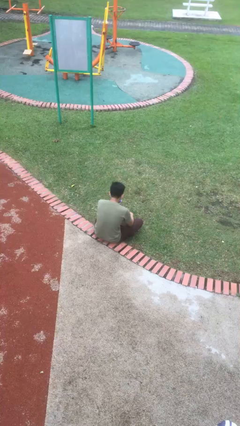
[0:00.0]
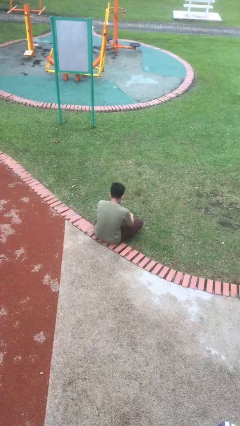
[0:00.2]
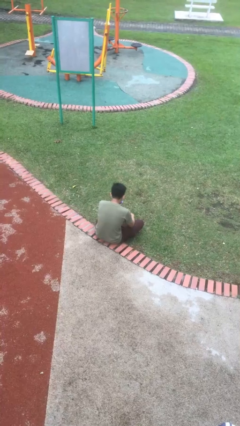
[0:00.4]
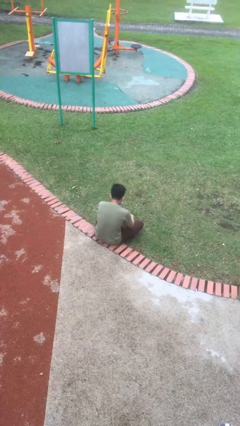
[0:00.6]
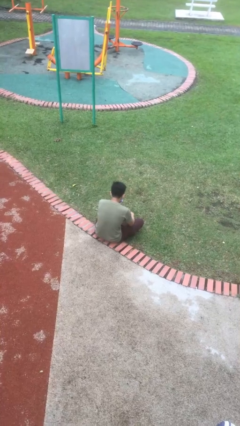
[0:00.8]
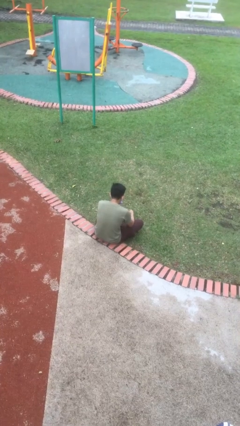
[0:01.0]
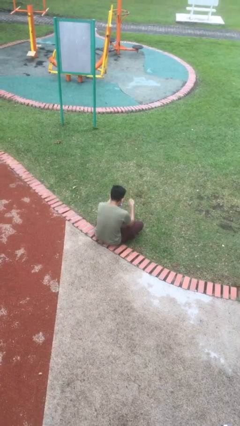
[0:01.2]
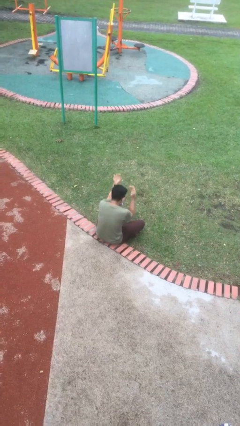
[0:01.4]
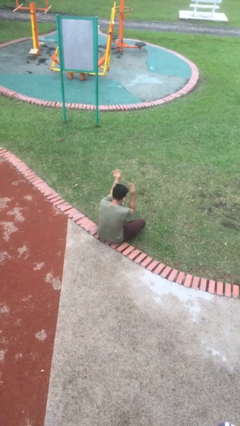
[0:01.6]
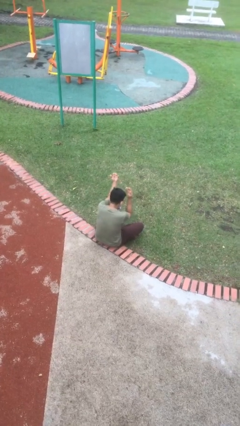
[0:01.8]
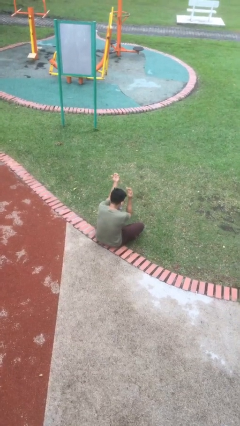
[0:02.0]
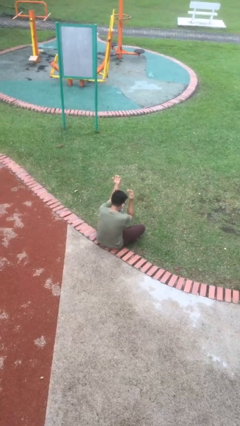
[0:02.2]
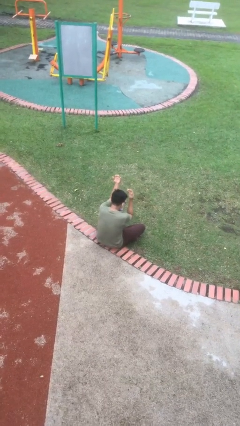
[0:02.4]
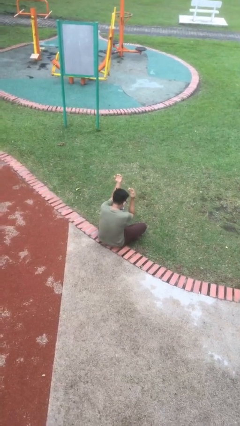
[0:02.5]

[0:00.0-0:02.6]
person prays

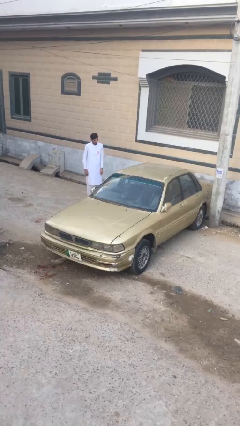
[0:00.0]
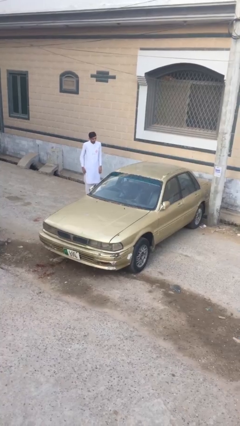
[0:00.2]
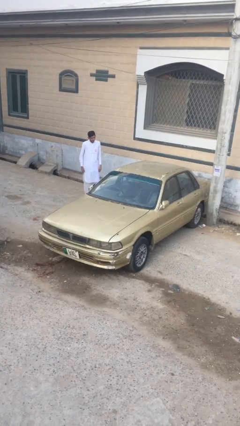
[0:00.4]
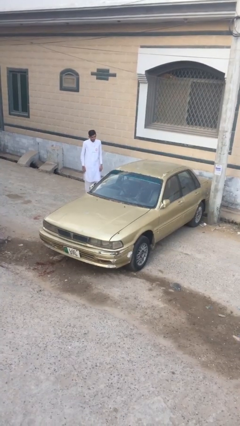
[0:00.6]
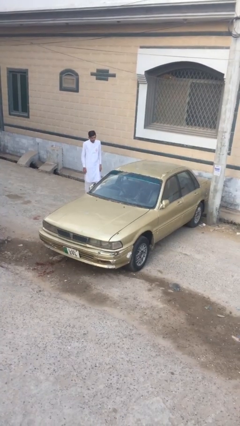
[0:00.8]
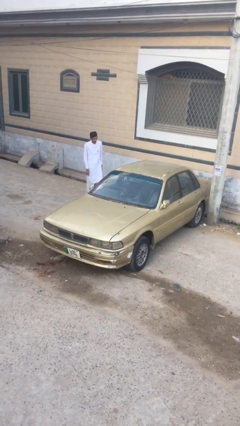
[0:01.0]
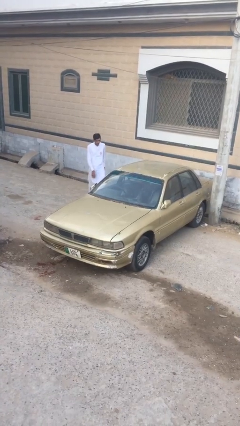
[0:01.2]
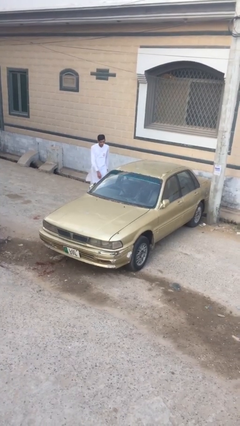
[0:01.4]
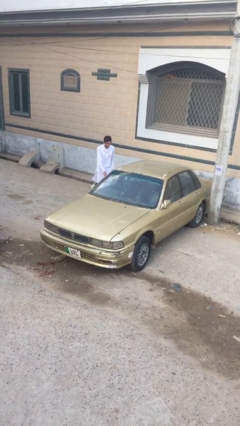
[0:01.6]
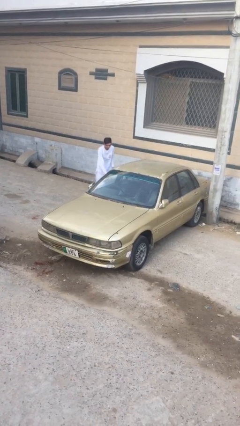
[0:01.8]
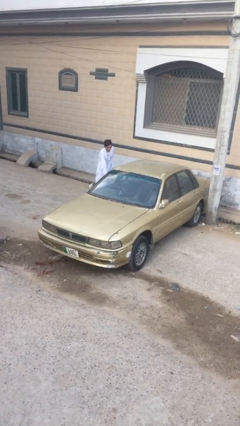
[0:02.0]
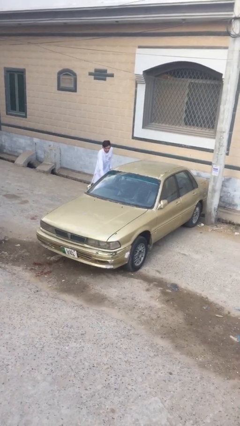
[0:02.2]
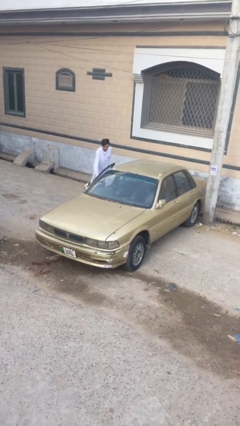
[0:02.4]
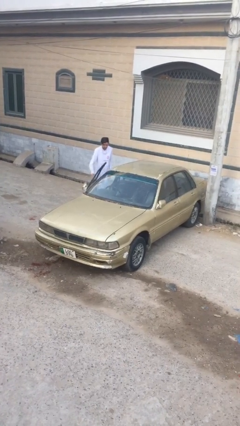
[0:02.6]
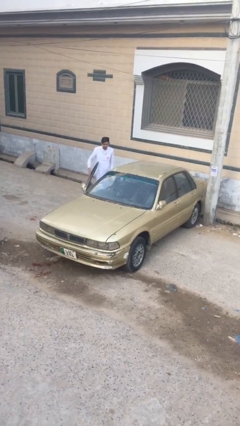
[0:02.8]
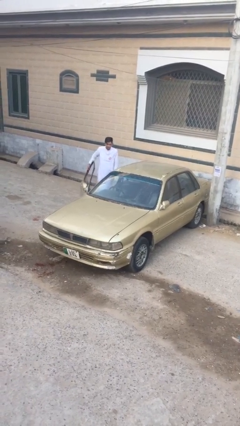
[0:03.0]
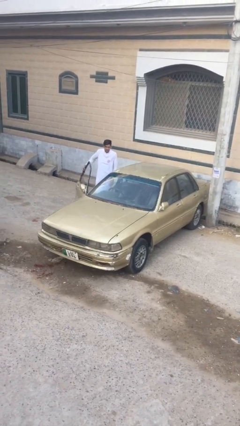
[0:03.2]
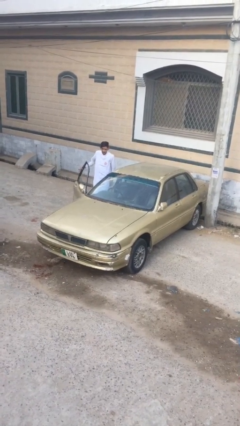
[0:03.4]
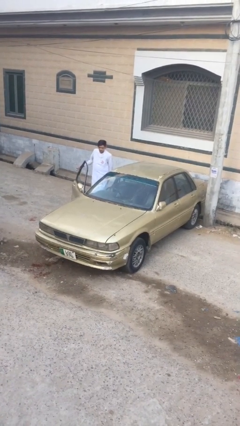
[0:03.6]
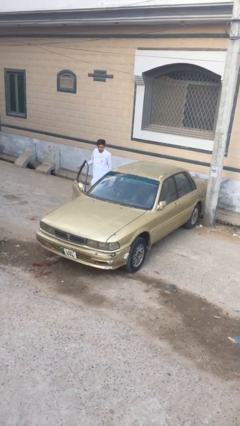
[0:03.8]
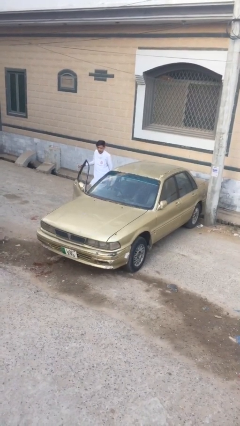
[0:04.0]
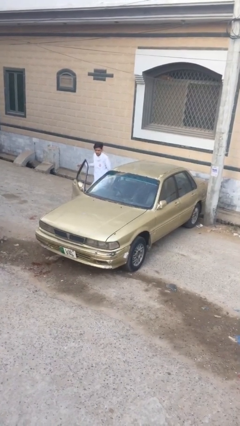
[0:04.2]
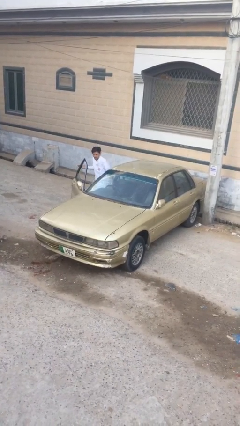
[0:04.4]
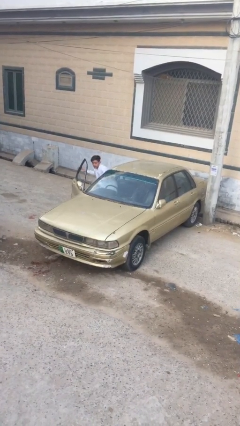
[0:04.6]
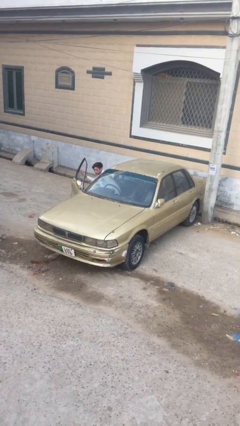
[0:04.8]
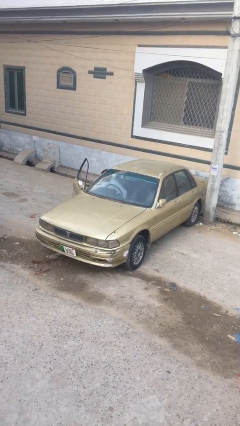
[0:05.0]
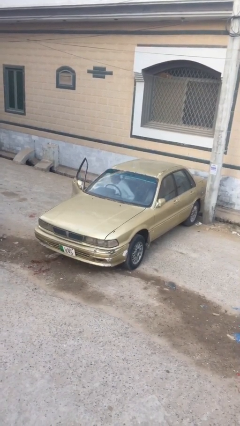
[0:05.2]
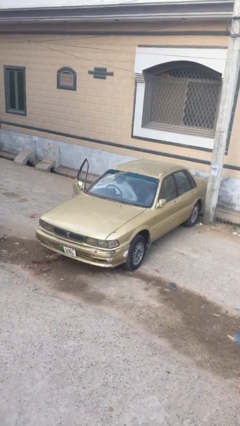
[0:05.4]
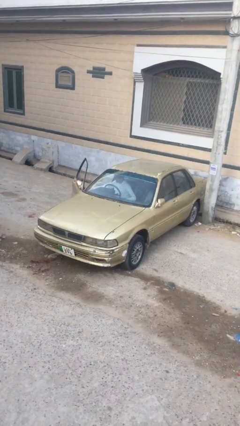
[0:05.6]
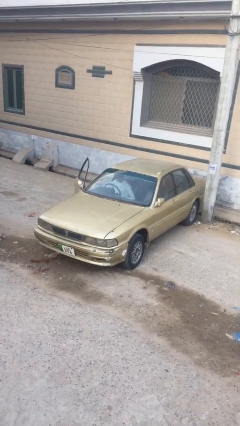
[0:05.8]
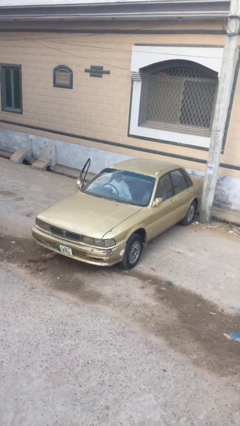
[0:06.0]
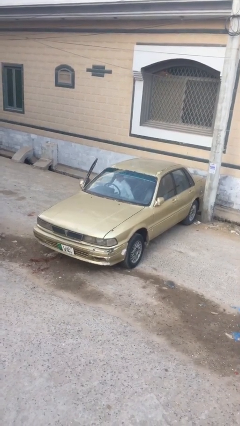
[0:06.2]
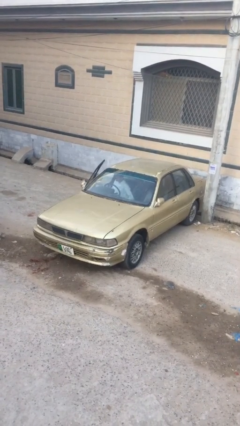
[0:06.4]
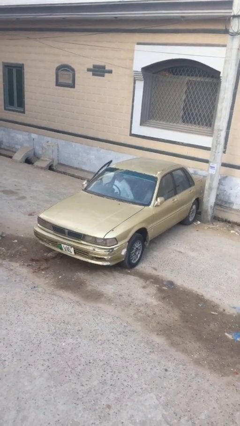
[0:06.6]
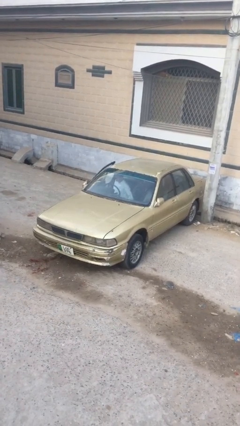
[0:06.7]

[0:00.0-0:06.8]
car picks up person

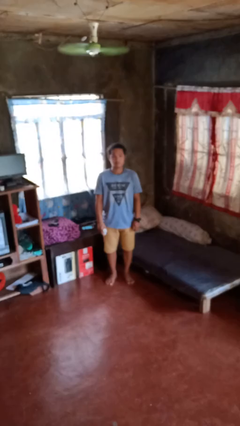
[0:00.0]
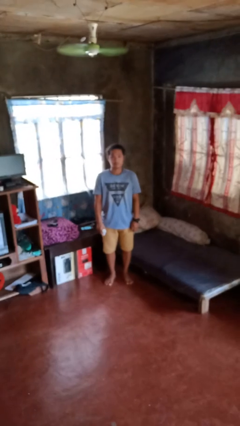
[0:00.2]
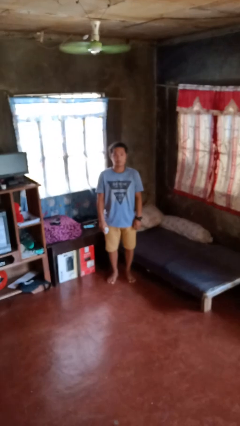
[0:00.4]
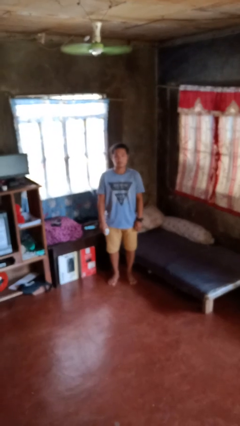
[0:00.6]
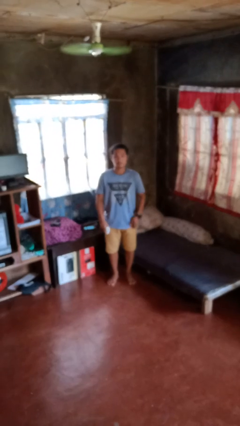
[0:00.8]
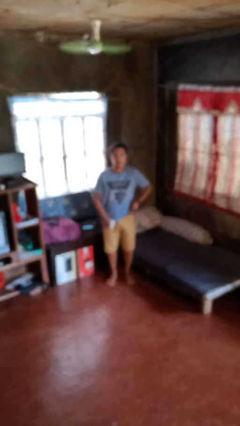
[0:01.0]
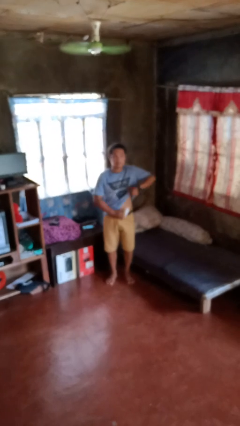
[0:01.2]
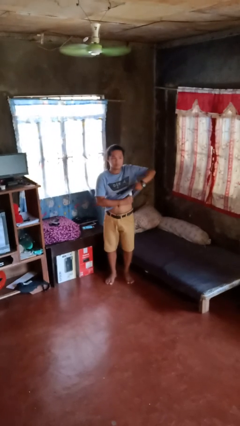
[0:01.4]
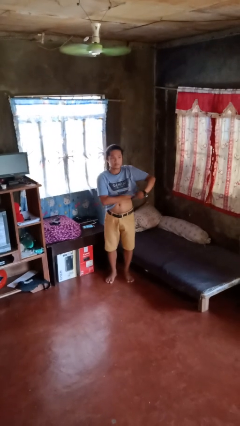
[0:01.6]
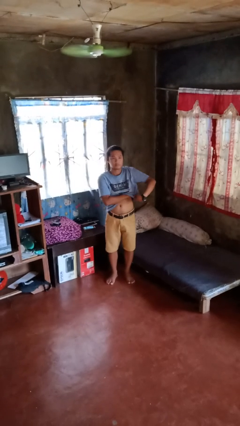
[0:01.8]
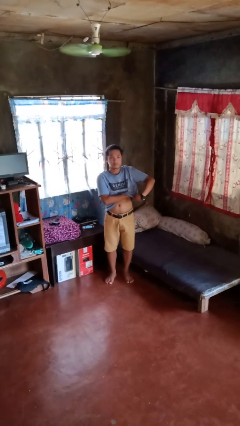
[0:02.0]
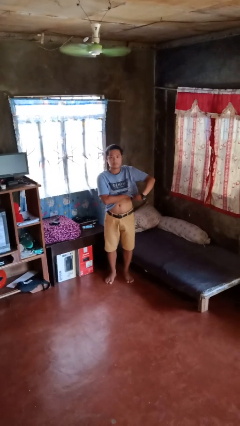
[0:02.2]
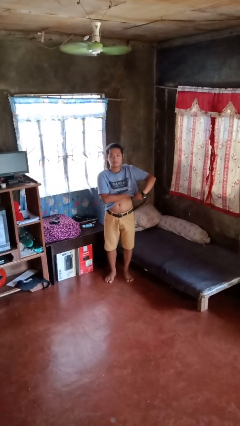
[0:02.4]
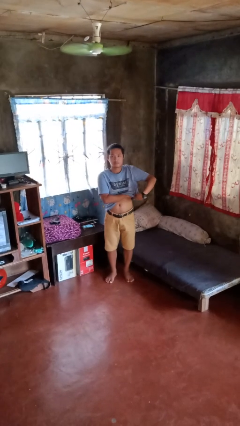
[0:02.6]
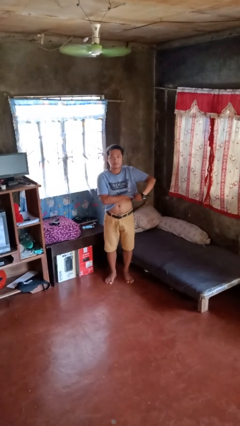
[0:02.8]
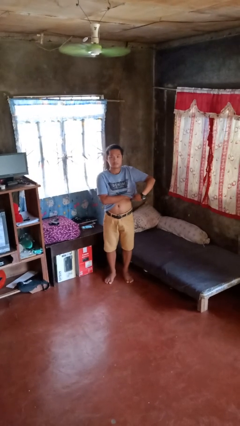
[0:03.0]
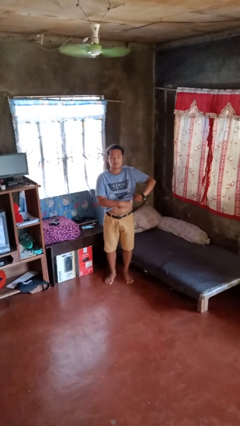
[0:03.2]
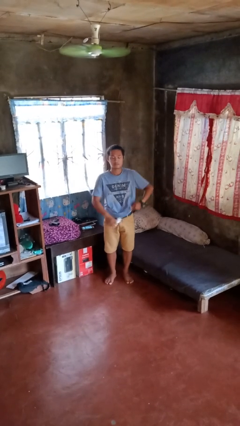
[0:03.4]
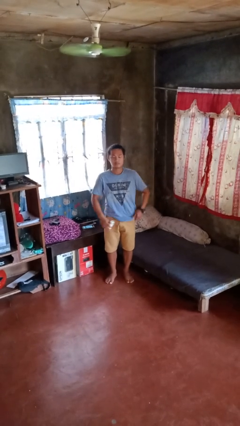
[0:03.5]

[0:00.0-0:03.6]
person applies deodorant

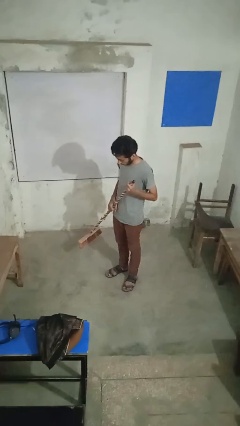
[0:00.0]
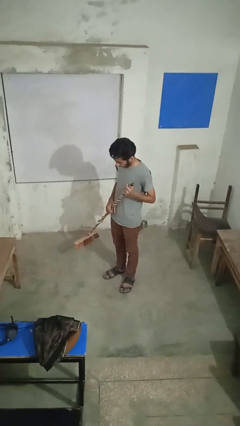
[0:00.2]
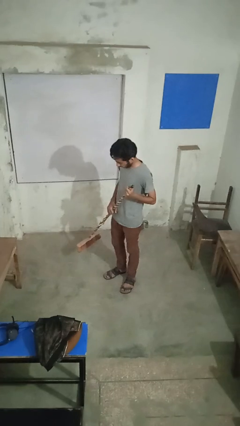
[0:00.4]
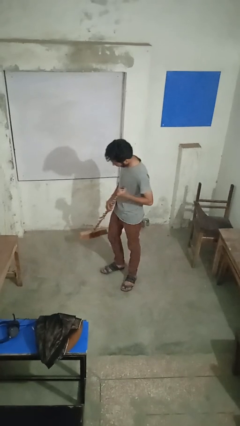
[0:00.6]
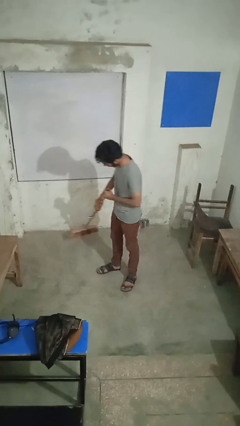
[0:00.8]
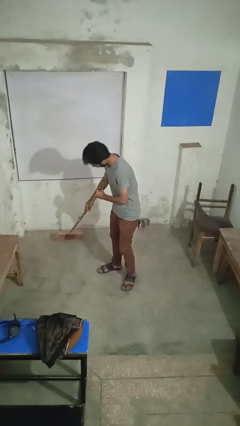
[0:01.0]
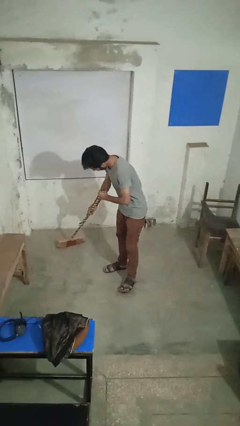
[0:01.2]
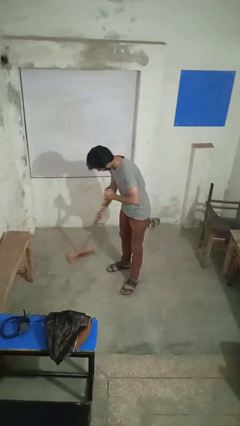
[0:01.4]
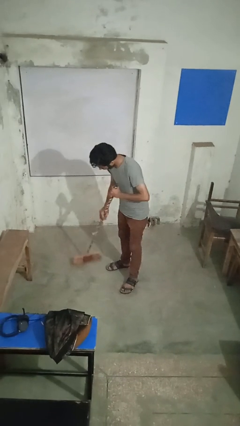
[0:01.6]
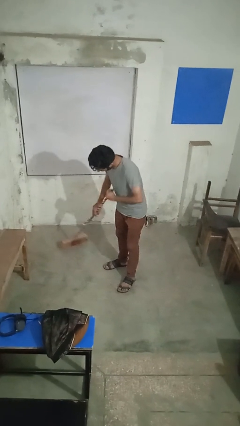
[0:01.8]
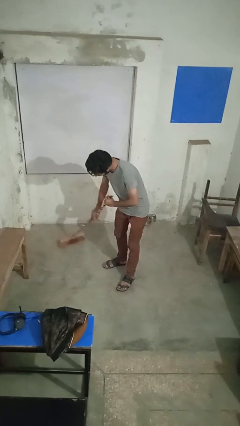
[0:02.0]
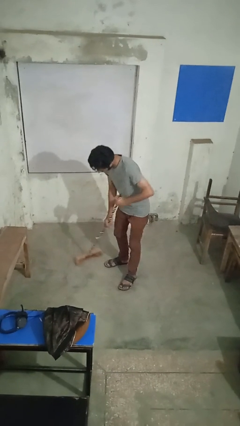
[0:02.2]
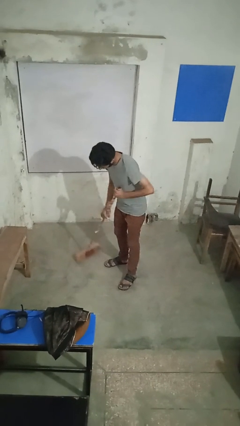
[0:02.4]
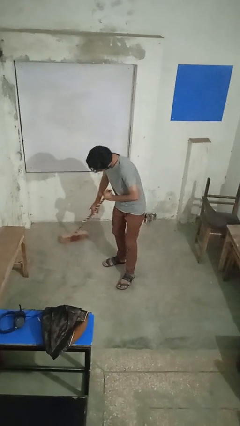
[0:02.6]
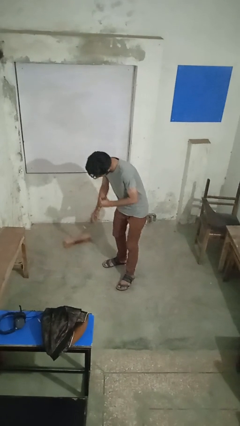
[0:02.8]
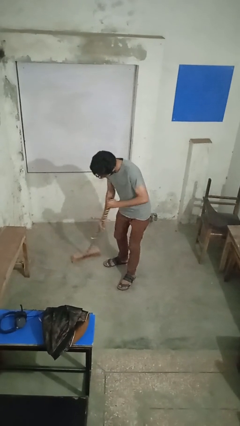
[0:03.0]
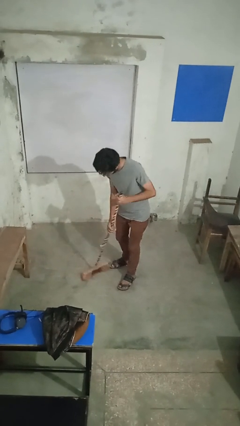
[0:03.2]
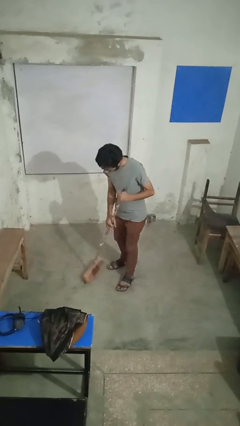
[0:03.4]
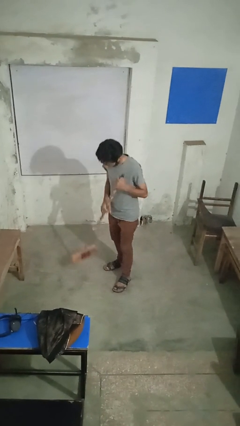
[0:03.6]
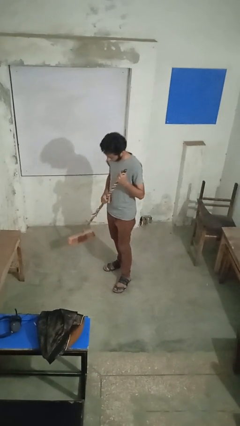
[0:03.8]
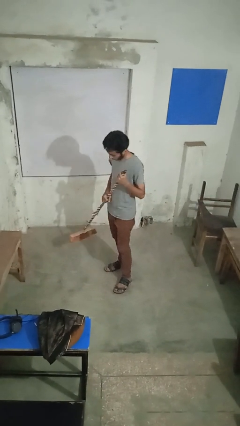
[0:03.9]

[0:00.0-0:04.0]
person sweeps floor

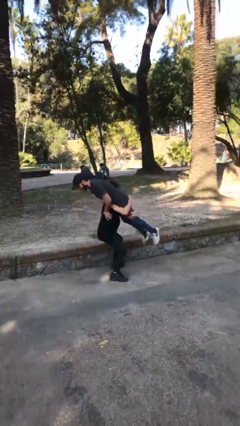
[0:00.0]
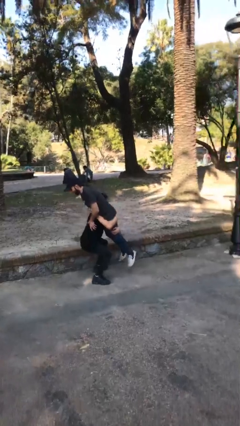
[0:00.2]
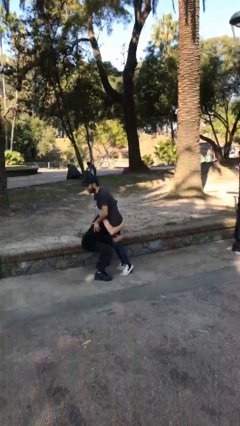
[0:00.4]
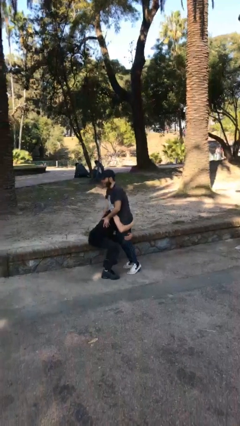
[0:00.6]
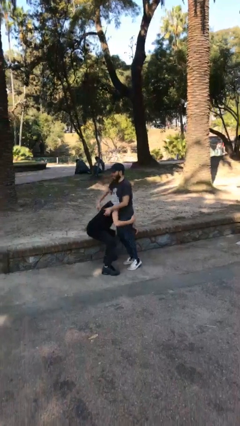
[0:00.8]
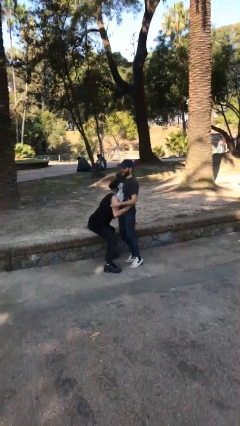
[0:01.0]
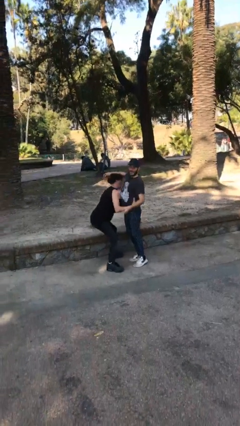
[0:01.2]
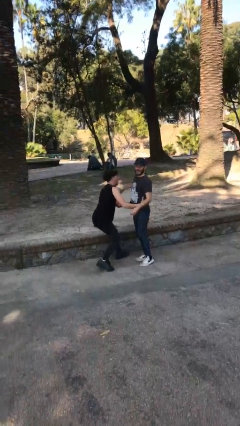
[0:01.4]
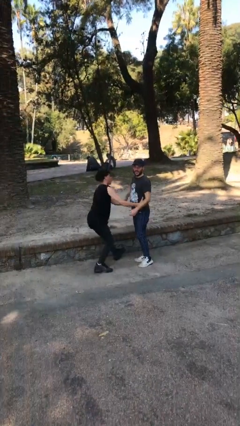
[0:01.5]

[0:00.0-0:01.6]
person puts down person
